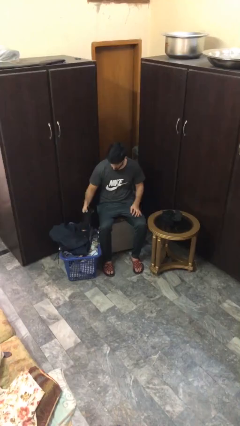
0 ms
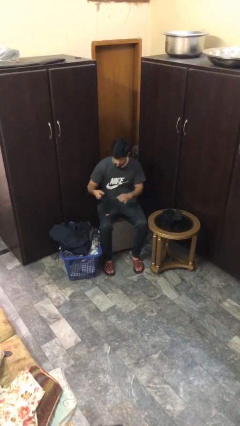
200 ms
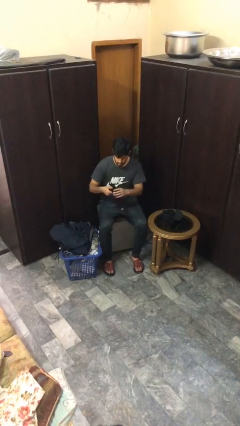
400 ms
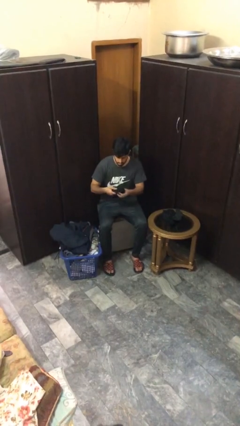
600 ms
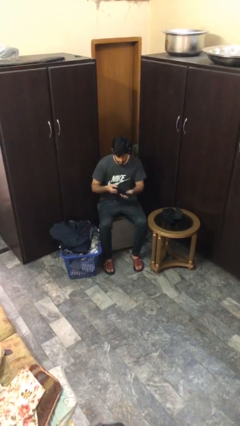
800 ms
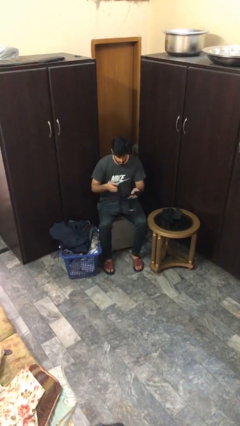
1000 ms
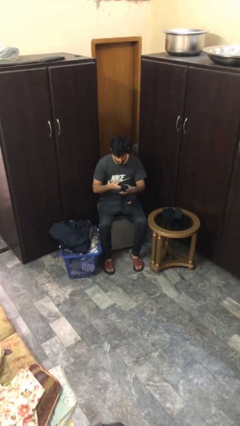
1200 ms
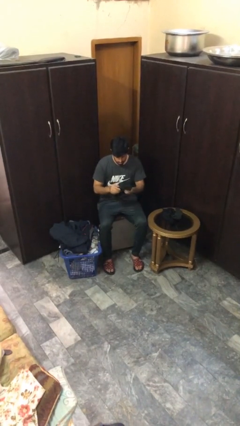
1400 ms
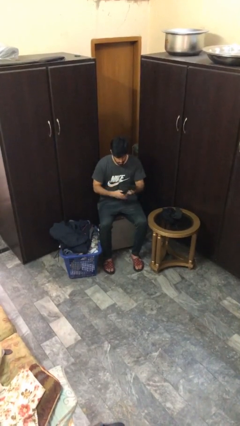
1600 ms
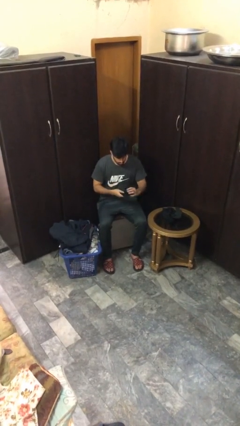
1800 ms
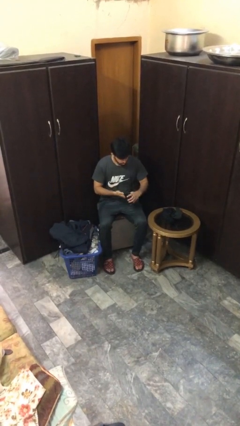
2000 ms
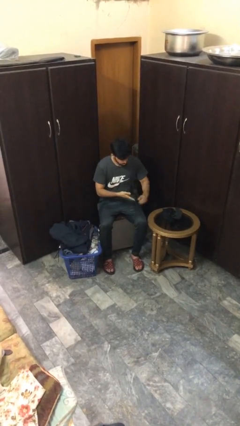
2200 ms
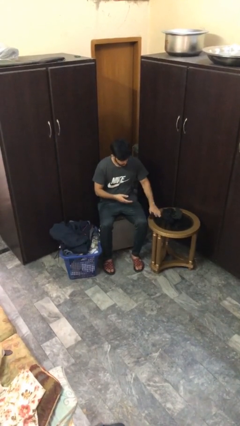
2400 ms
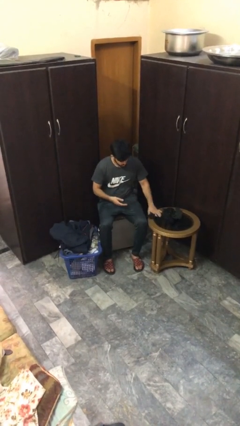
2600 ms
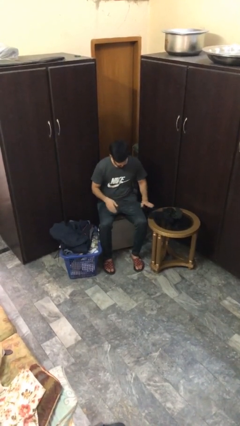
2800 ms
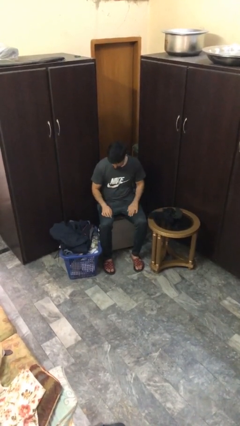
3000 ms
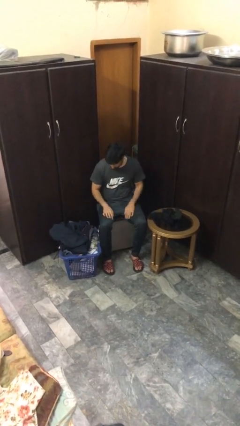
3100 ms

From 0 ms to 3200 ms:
person folds socks

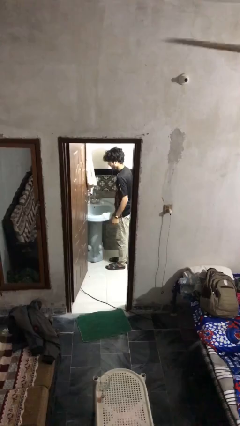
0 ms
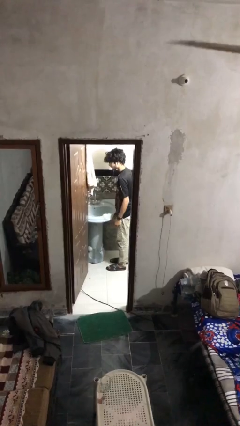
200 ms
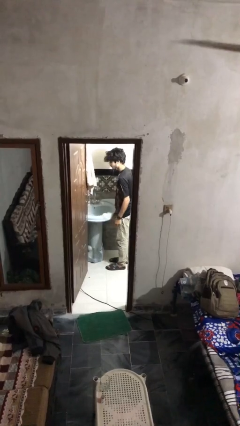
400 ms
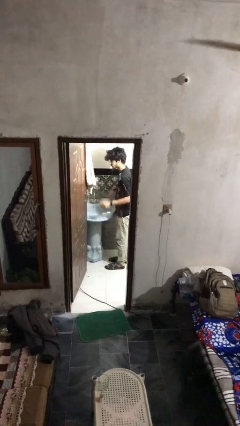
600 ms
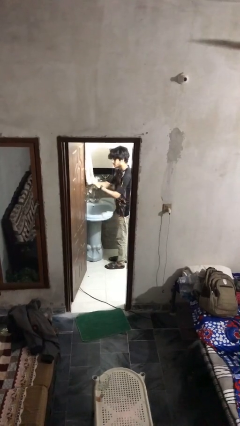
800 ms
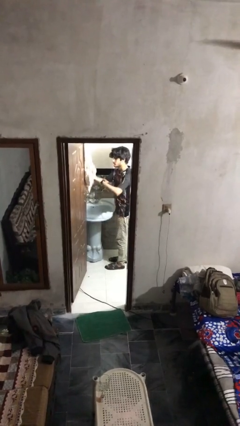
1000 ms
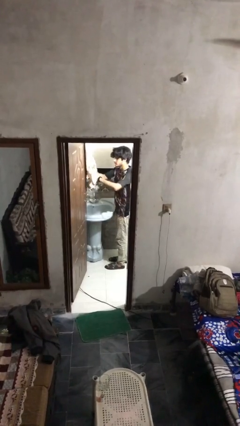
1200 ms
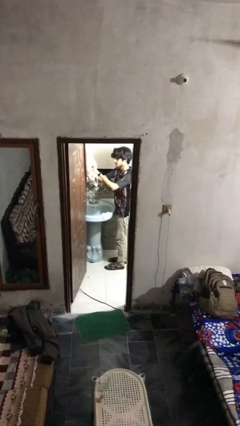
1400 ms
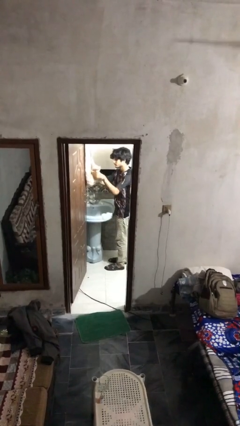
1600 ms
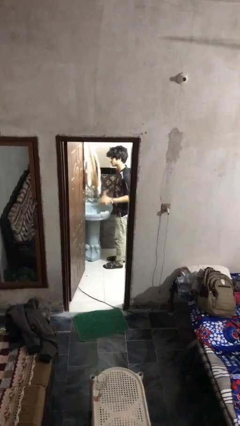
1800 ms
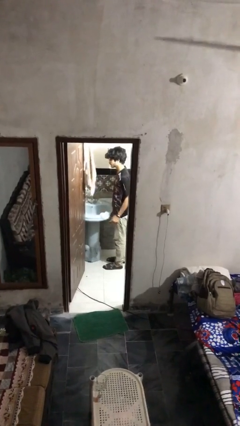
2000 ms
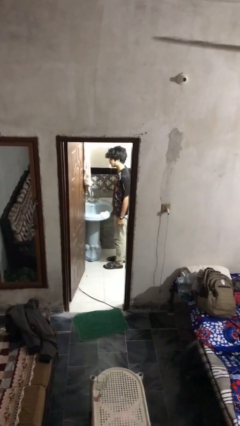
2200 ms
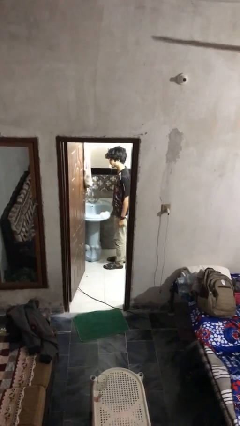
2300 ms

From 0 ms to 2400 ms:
person dries hands with towel

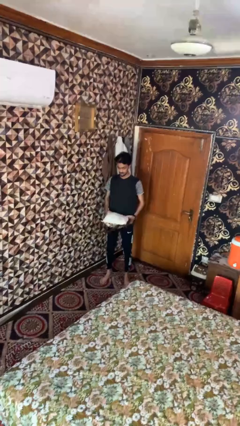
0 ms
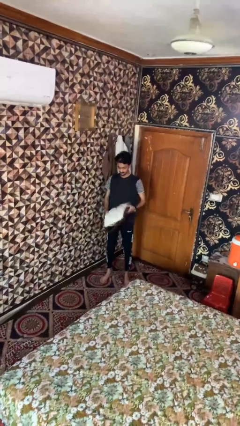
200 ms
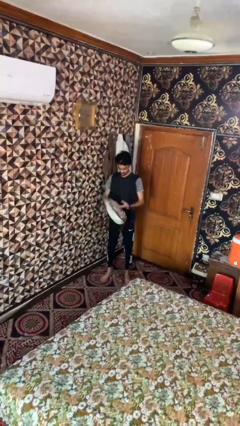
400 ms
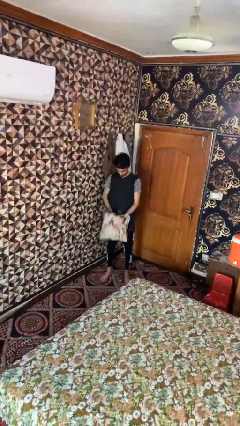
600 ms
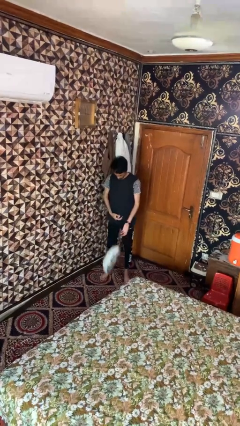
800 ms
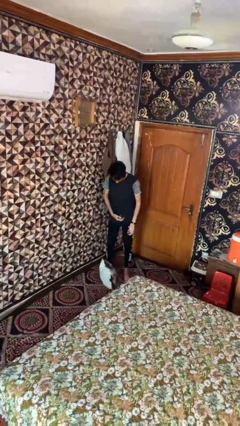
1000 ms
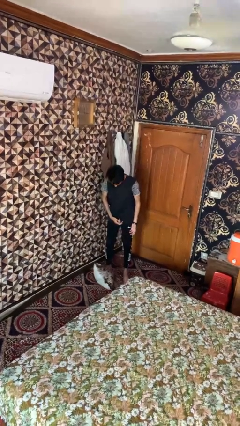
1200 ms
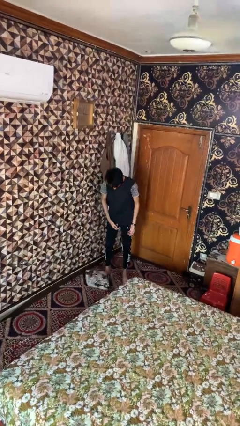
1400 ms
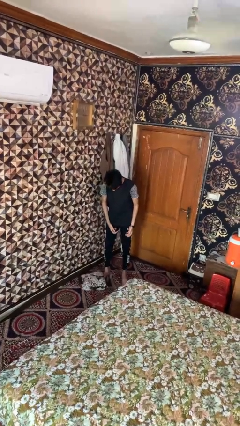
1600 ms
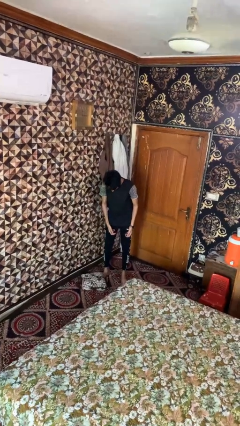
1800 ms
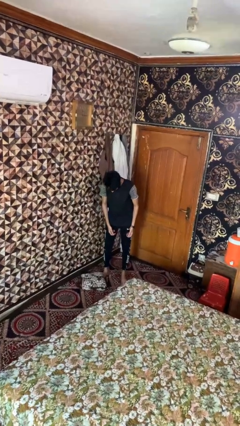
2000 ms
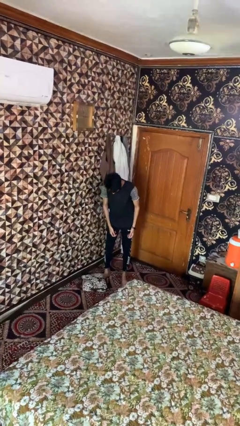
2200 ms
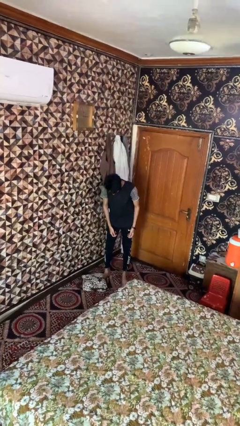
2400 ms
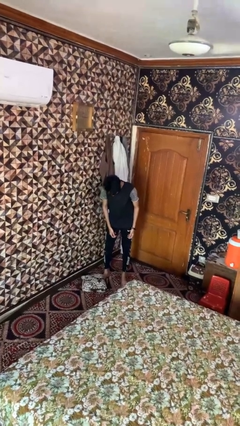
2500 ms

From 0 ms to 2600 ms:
person drops object

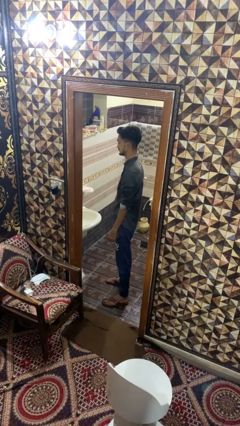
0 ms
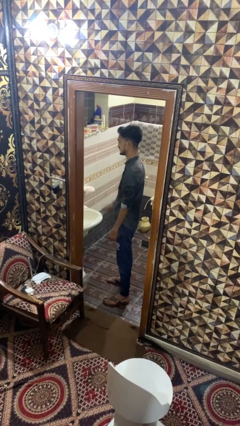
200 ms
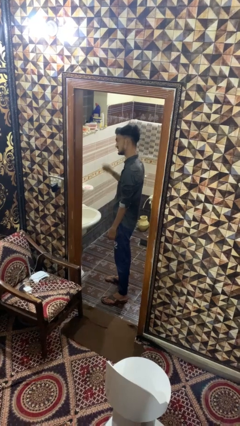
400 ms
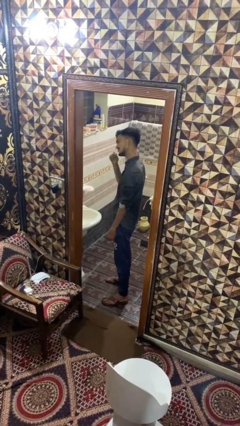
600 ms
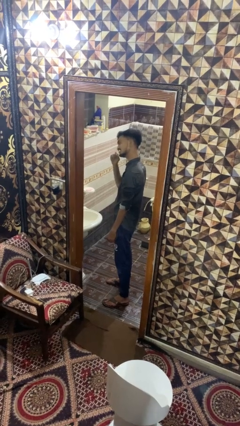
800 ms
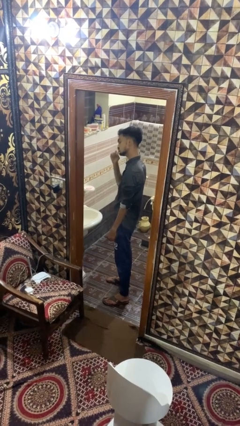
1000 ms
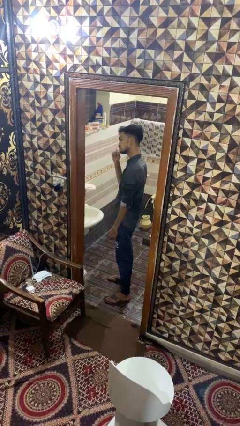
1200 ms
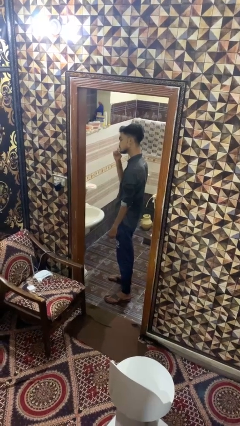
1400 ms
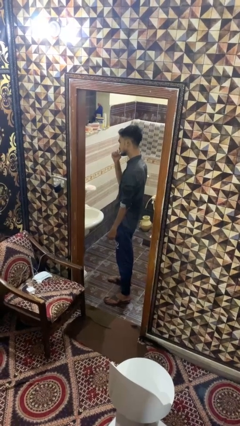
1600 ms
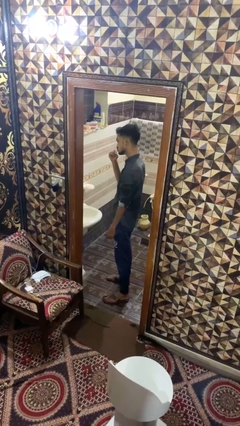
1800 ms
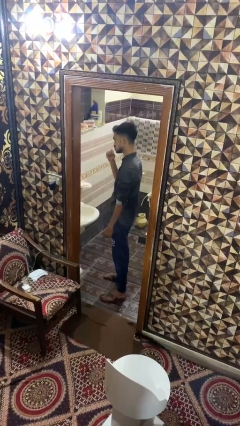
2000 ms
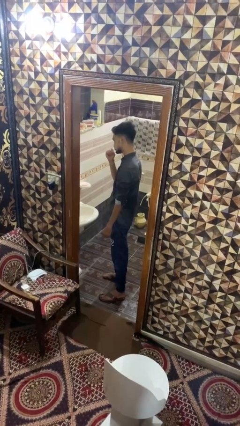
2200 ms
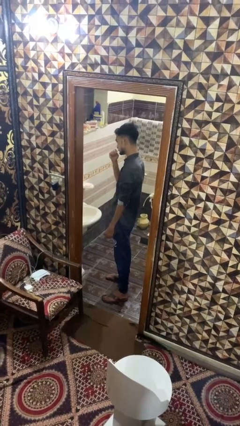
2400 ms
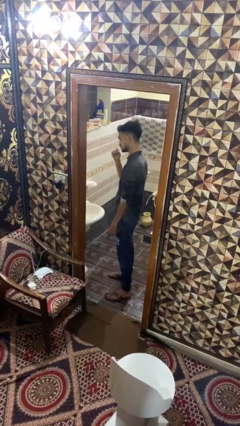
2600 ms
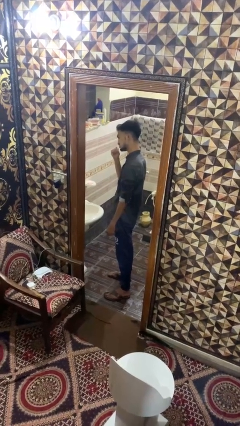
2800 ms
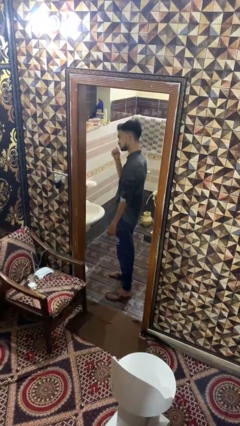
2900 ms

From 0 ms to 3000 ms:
person brushes teeth

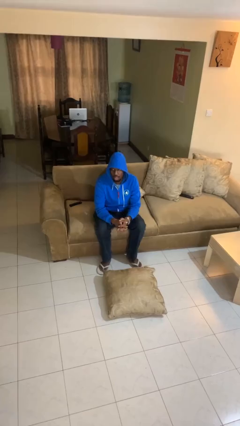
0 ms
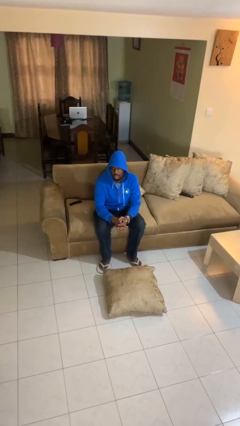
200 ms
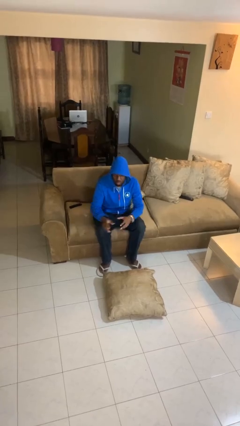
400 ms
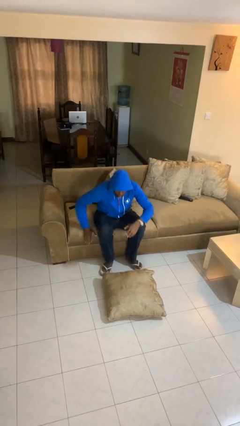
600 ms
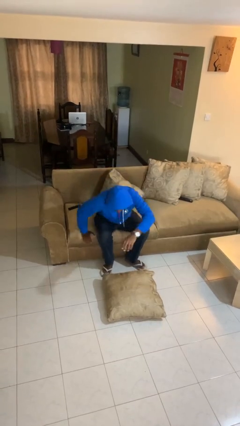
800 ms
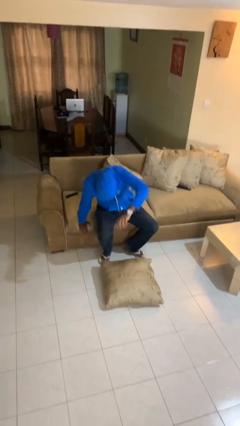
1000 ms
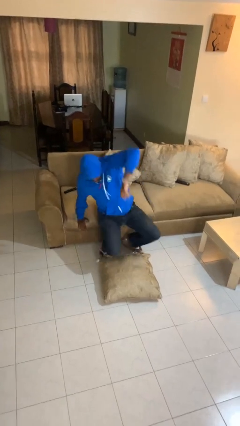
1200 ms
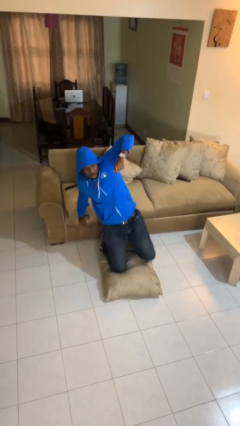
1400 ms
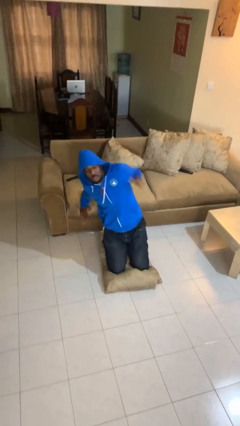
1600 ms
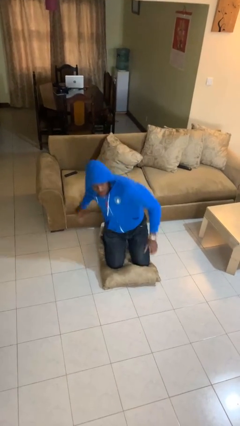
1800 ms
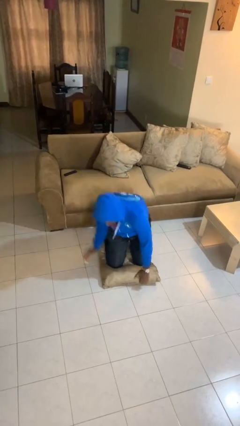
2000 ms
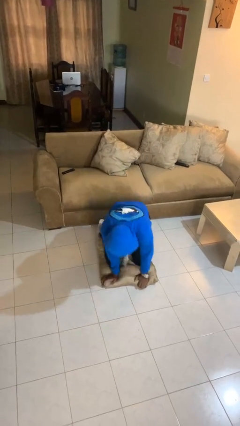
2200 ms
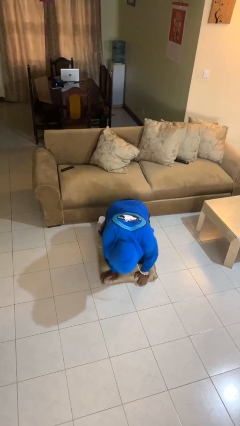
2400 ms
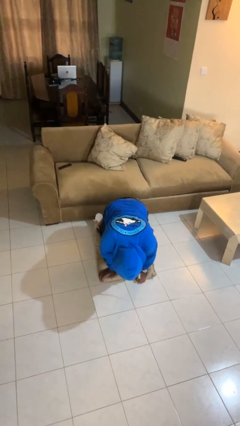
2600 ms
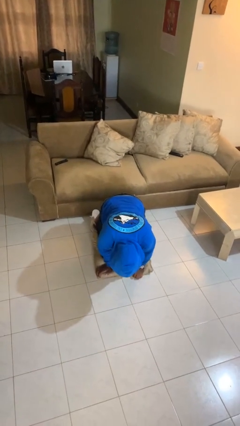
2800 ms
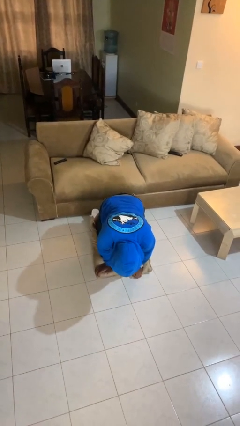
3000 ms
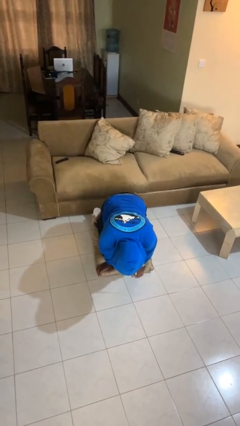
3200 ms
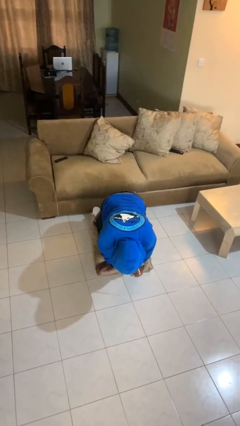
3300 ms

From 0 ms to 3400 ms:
person falls from chair

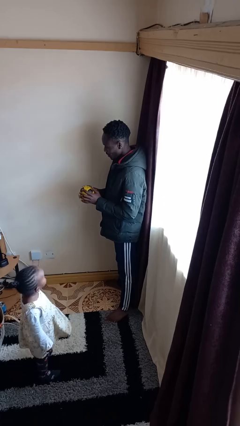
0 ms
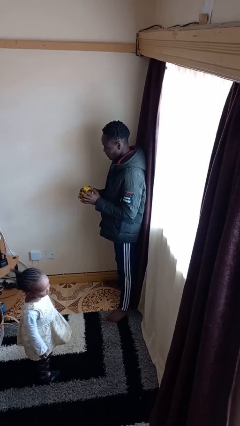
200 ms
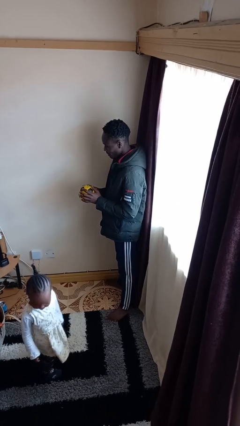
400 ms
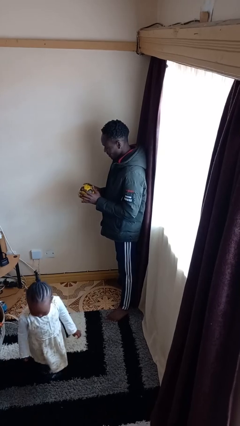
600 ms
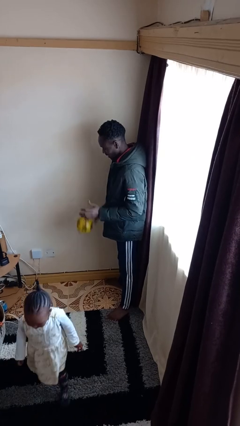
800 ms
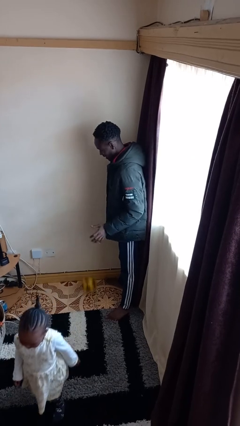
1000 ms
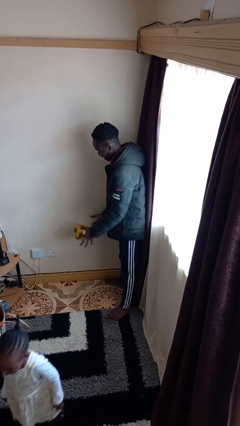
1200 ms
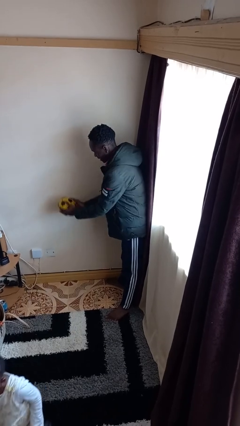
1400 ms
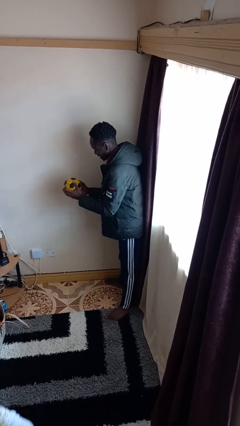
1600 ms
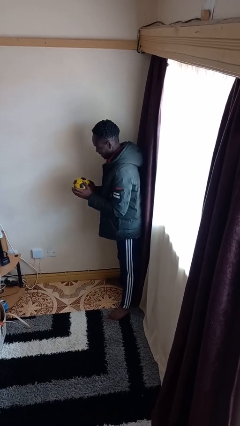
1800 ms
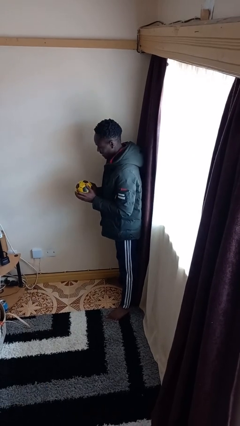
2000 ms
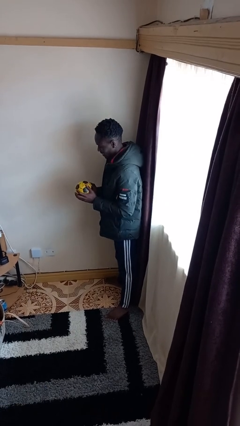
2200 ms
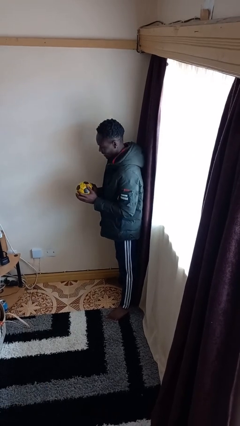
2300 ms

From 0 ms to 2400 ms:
person bounces ball on floor

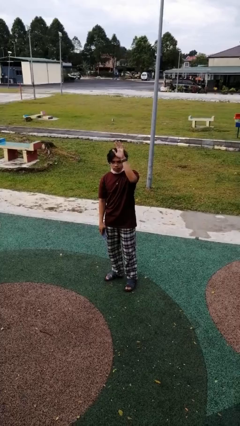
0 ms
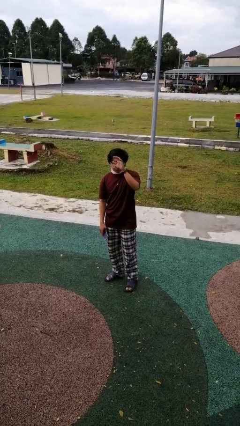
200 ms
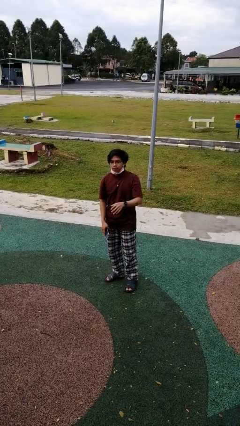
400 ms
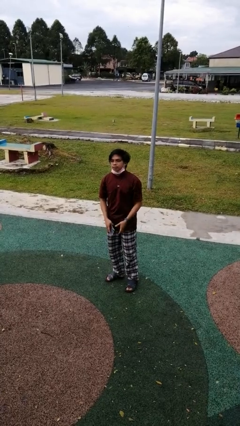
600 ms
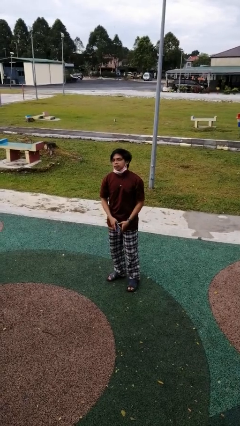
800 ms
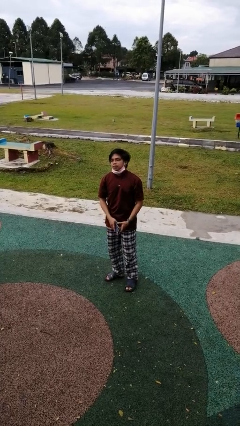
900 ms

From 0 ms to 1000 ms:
person gestures lower hand
